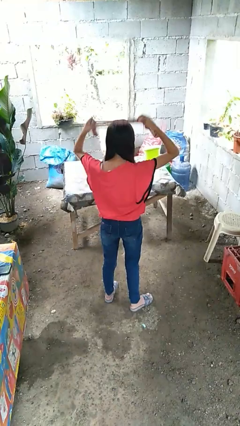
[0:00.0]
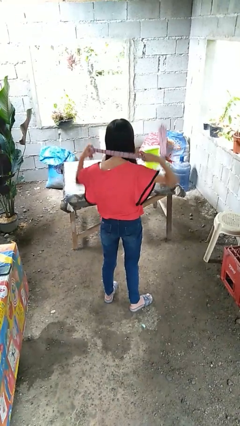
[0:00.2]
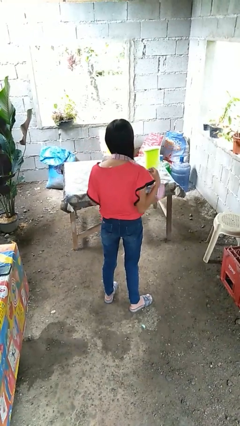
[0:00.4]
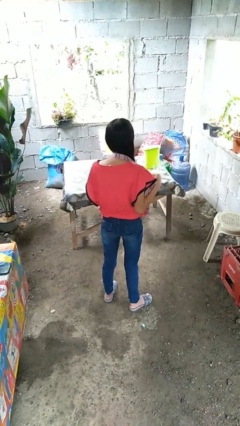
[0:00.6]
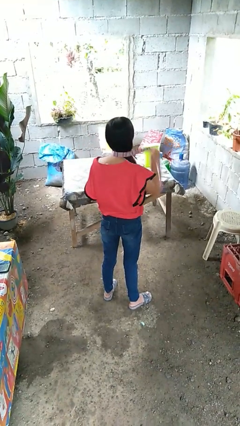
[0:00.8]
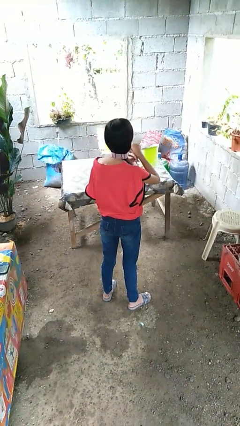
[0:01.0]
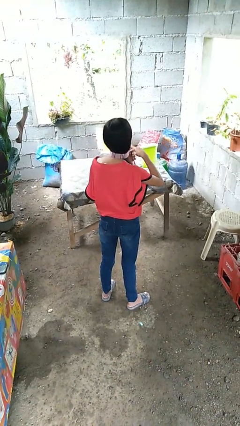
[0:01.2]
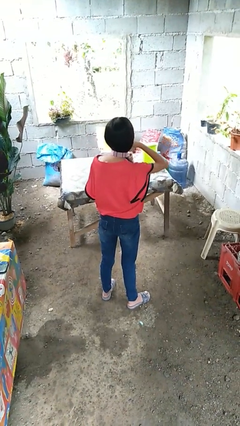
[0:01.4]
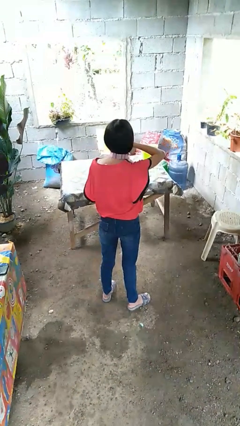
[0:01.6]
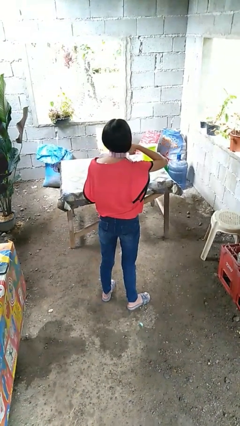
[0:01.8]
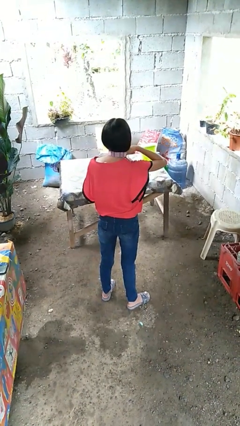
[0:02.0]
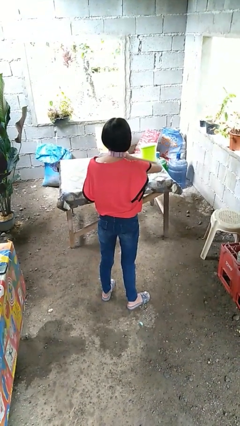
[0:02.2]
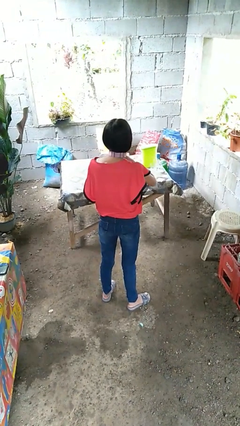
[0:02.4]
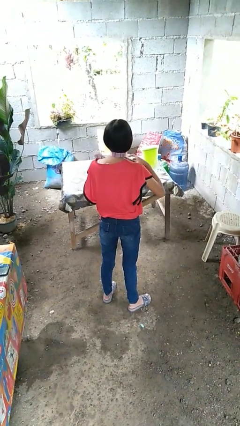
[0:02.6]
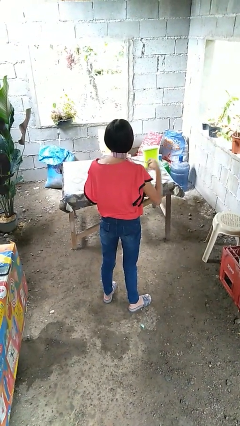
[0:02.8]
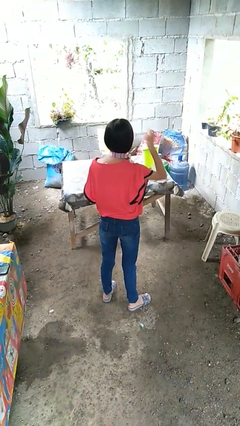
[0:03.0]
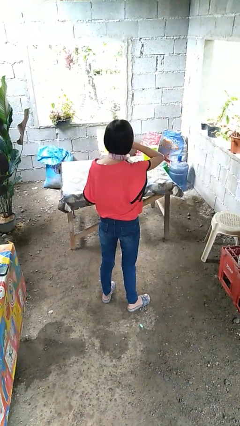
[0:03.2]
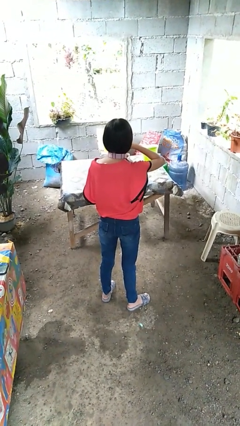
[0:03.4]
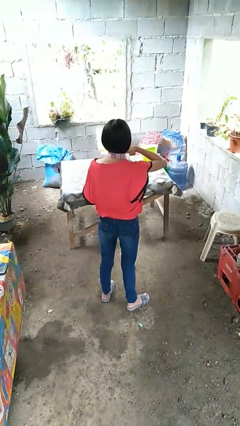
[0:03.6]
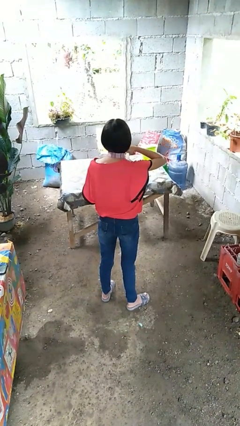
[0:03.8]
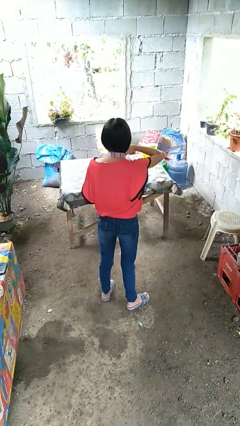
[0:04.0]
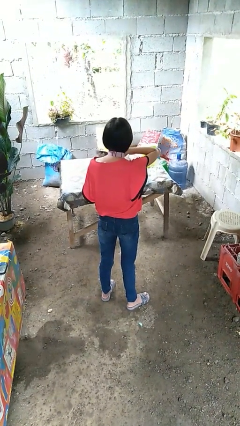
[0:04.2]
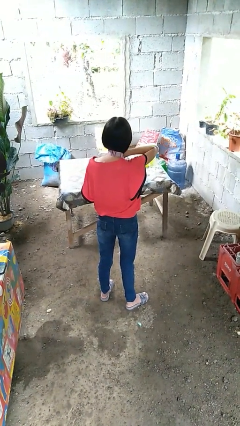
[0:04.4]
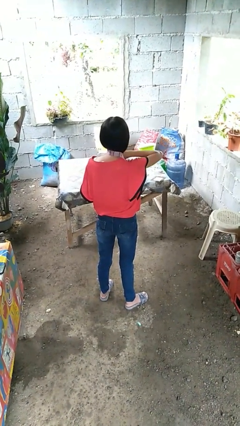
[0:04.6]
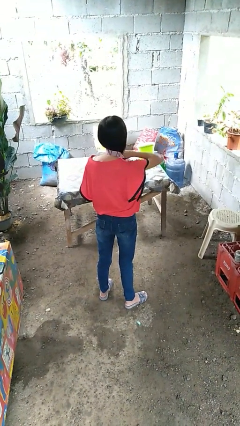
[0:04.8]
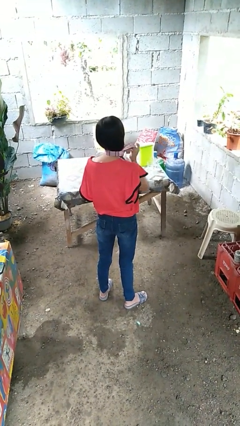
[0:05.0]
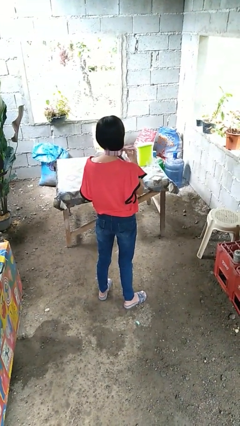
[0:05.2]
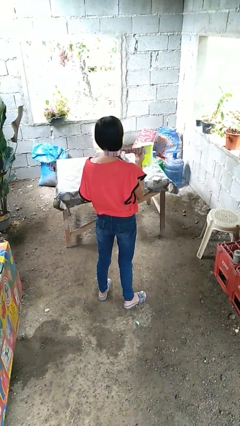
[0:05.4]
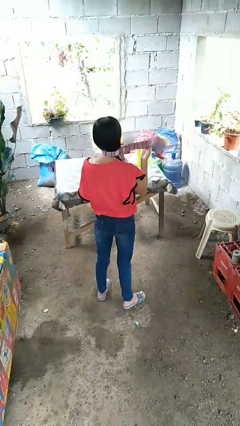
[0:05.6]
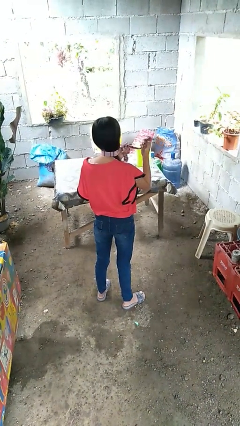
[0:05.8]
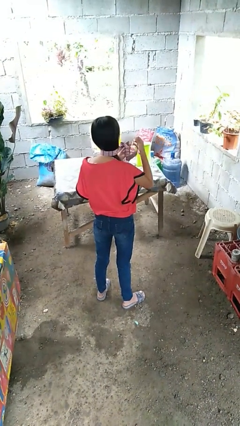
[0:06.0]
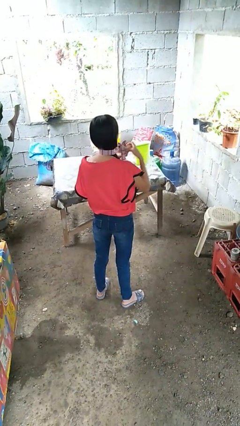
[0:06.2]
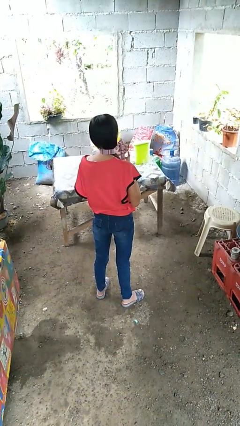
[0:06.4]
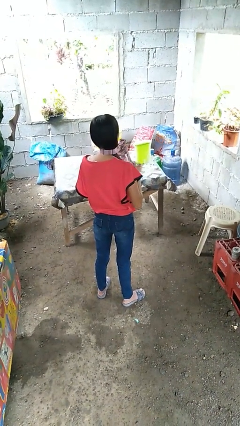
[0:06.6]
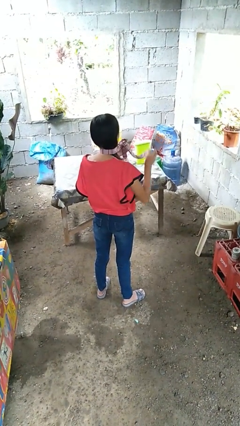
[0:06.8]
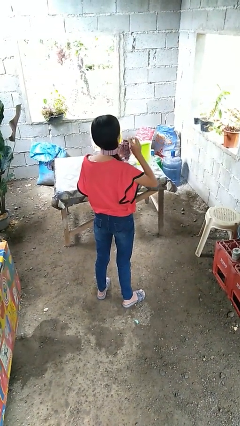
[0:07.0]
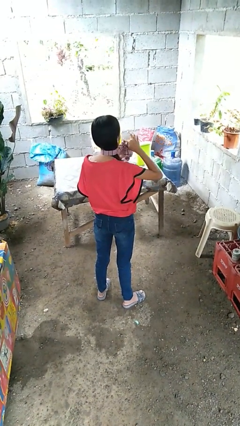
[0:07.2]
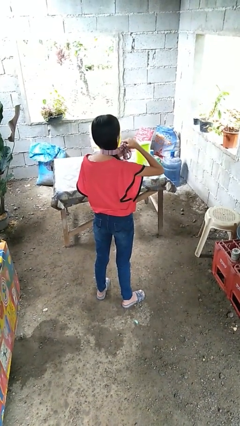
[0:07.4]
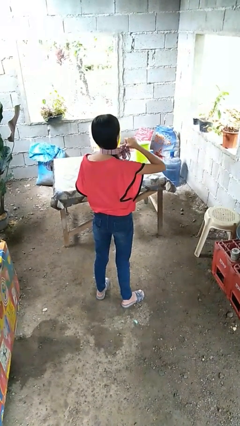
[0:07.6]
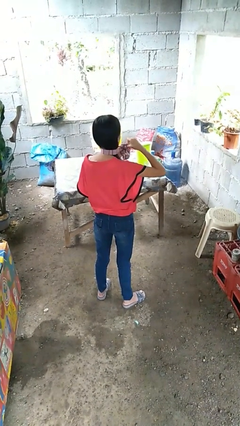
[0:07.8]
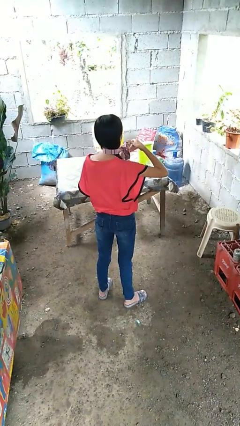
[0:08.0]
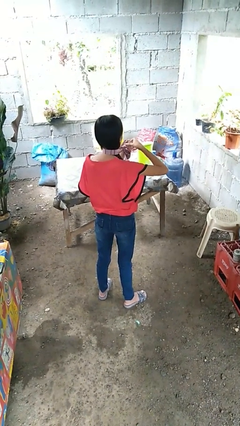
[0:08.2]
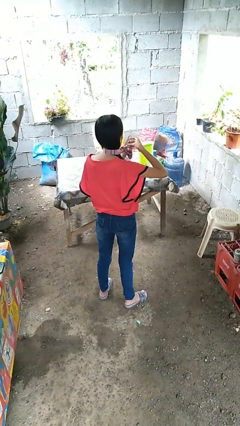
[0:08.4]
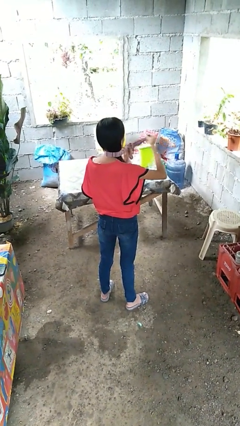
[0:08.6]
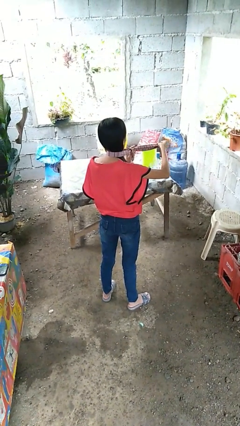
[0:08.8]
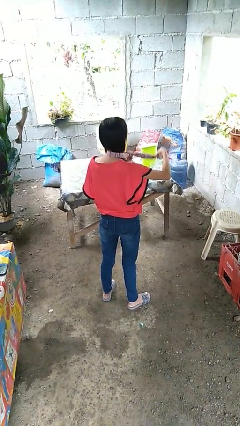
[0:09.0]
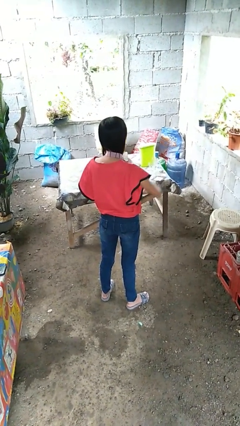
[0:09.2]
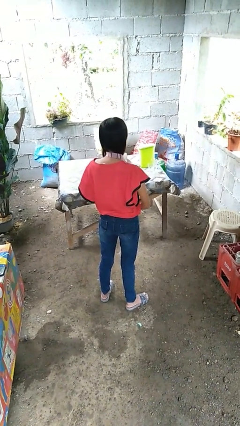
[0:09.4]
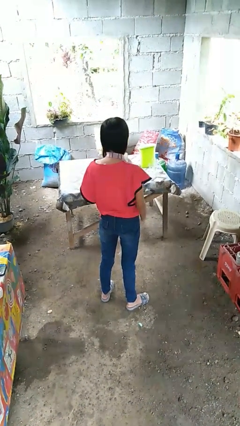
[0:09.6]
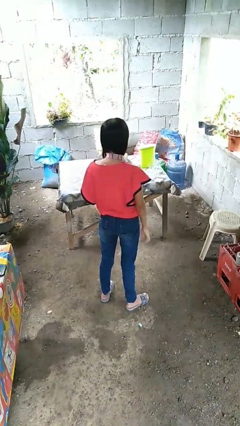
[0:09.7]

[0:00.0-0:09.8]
person puts on necktie

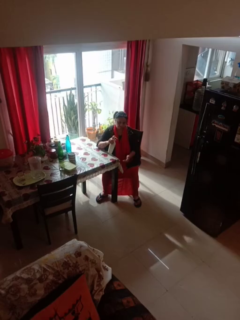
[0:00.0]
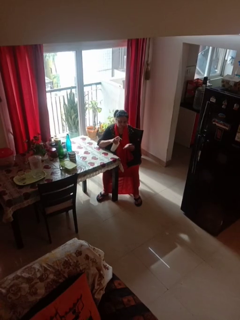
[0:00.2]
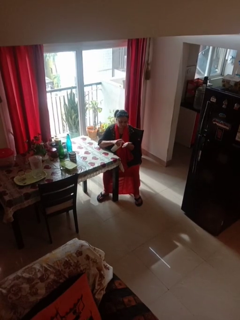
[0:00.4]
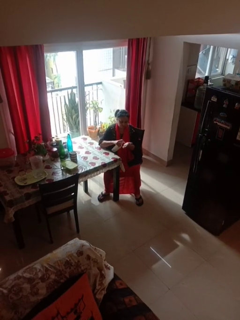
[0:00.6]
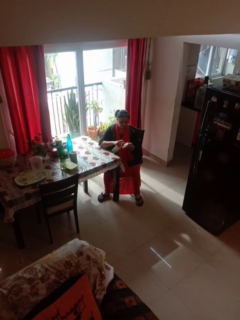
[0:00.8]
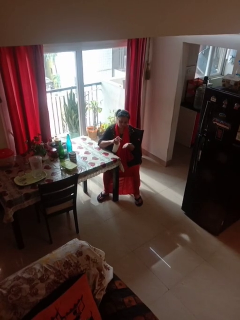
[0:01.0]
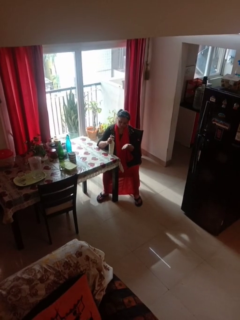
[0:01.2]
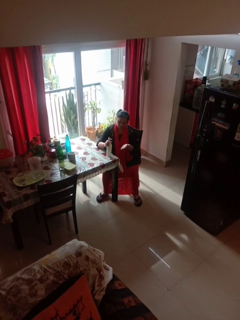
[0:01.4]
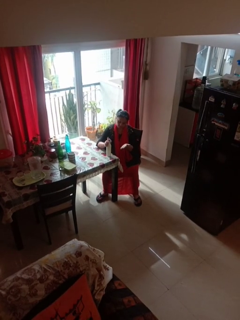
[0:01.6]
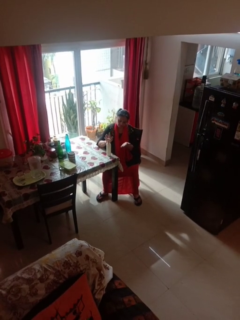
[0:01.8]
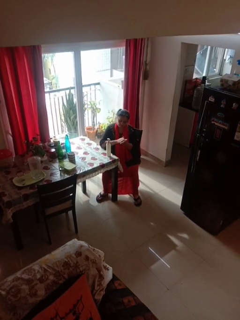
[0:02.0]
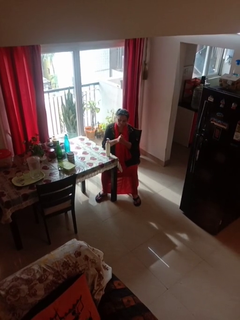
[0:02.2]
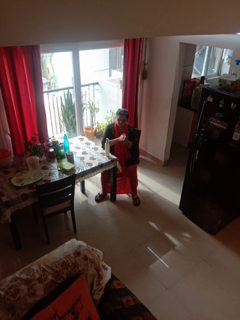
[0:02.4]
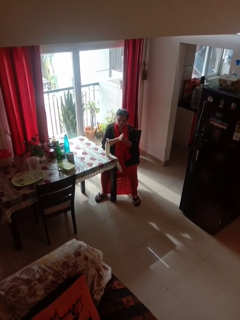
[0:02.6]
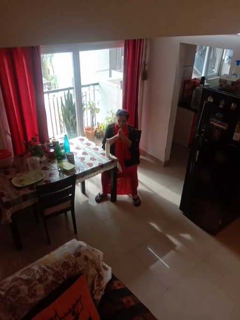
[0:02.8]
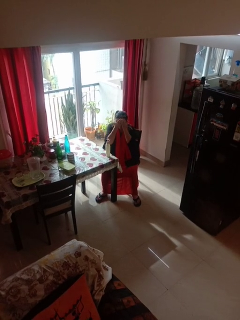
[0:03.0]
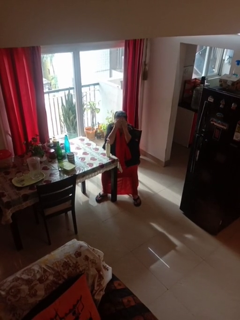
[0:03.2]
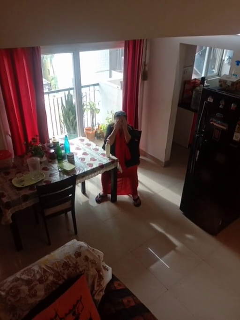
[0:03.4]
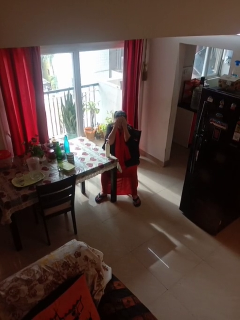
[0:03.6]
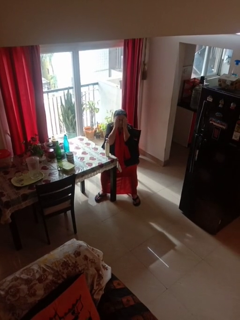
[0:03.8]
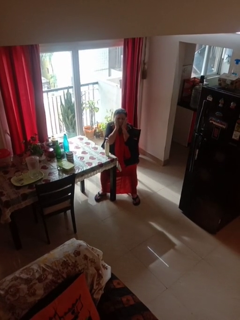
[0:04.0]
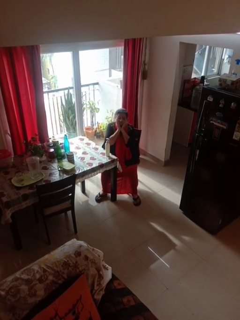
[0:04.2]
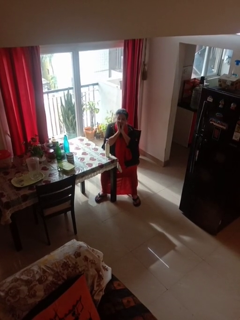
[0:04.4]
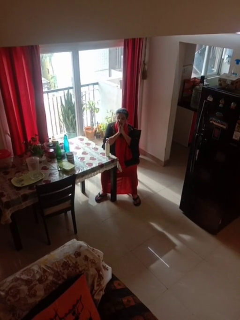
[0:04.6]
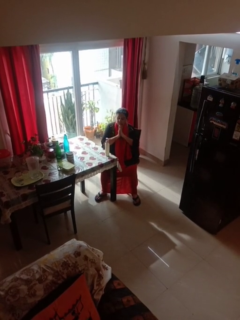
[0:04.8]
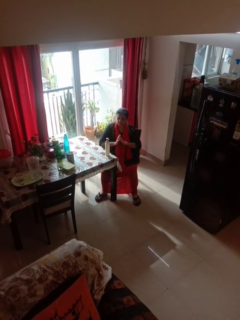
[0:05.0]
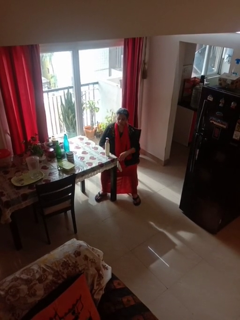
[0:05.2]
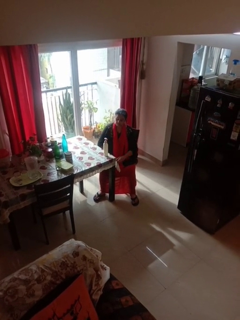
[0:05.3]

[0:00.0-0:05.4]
person applies facial moisturizer

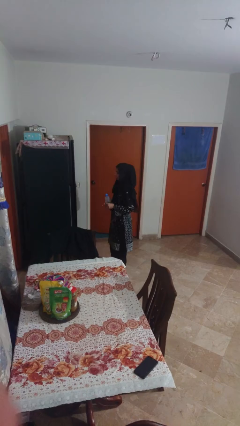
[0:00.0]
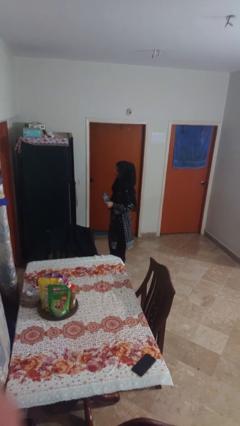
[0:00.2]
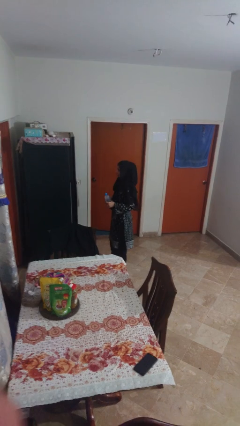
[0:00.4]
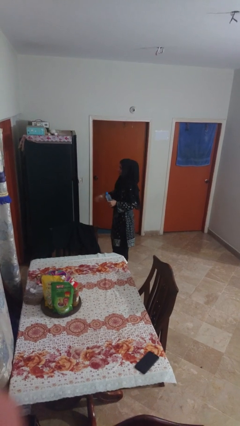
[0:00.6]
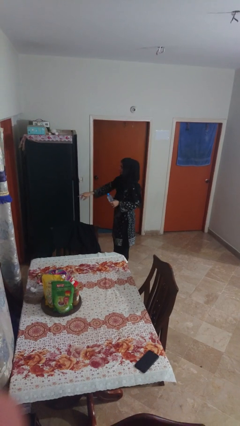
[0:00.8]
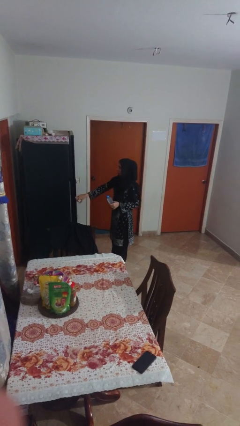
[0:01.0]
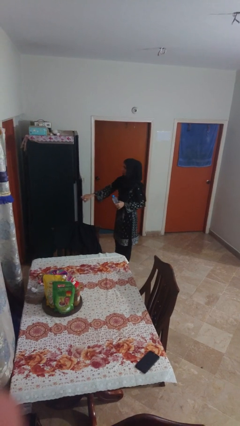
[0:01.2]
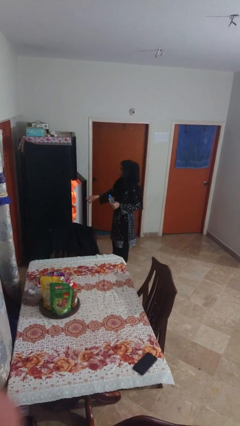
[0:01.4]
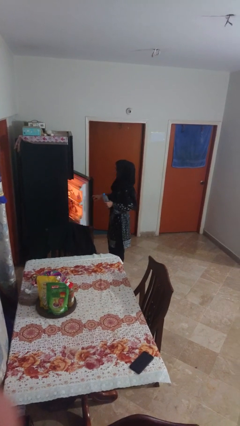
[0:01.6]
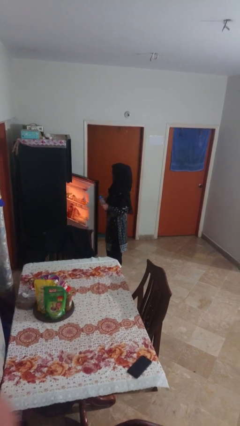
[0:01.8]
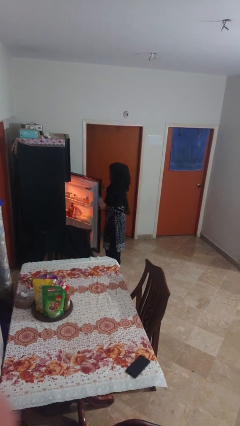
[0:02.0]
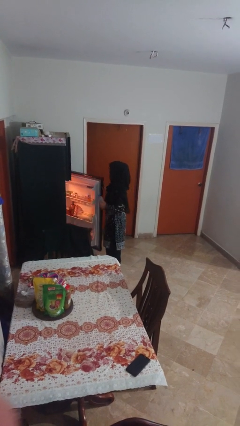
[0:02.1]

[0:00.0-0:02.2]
person opens refrigerator

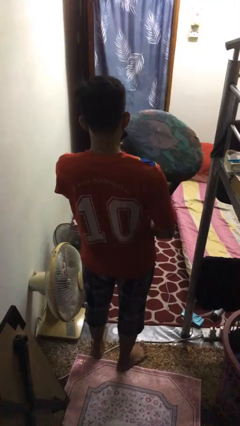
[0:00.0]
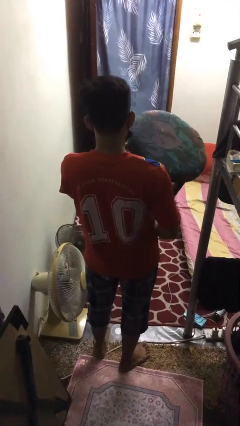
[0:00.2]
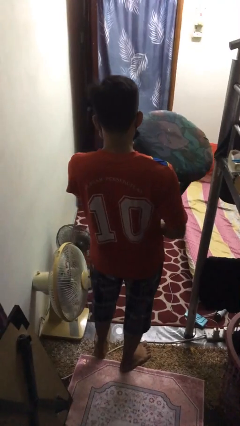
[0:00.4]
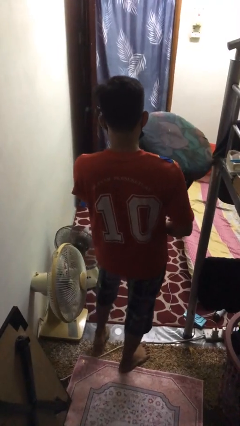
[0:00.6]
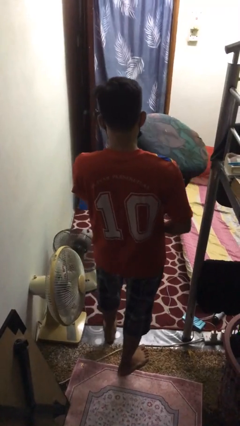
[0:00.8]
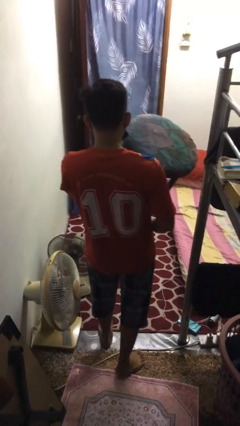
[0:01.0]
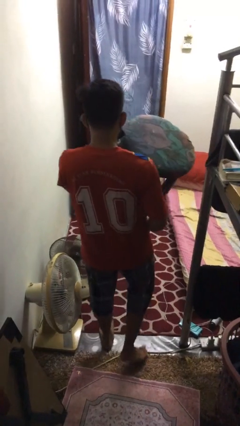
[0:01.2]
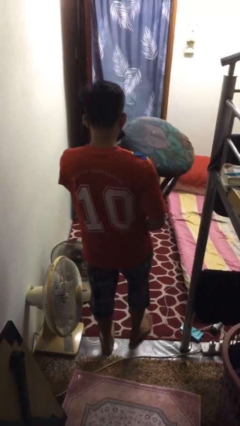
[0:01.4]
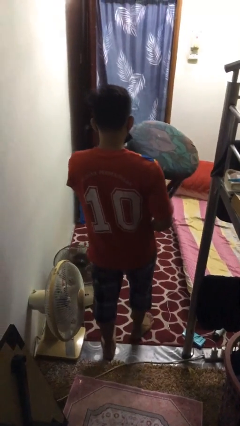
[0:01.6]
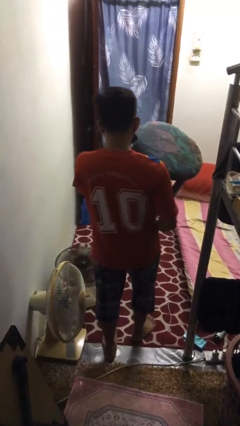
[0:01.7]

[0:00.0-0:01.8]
person carries furniture
